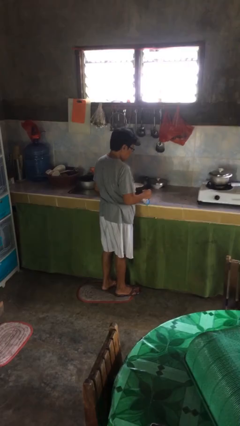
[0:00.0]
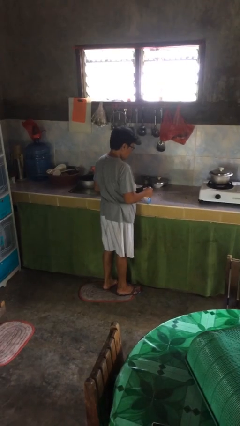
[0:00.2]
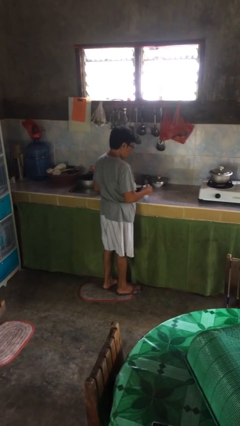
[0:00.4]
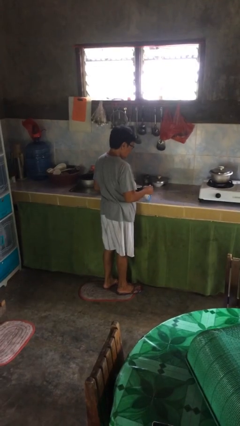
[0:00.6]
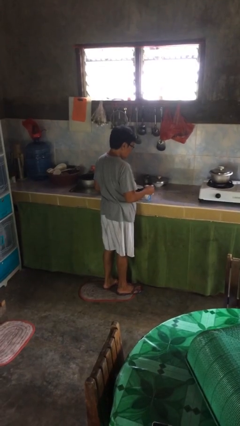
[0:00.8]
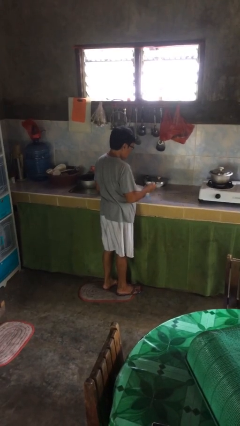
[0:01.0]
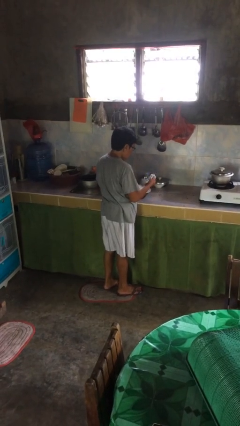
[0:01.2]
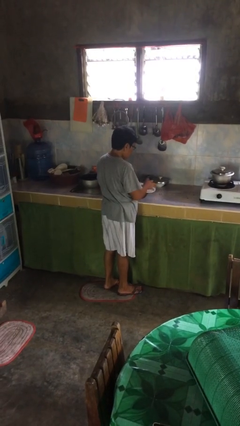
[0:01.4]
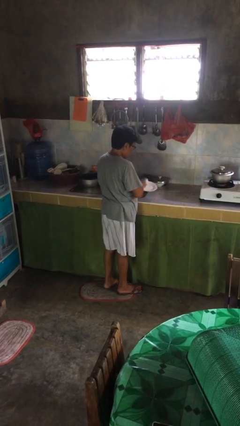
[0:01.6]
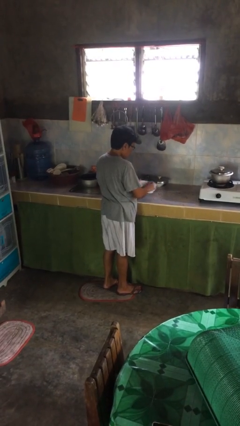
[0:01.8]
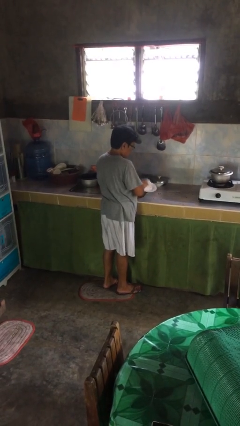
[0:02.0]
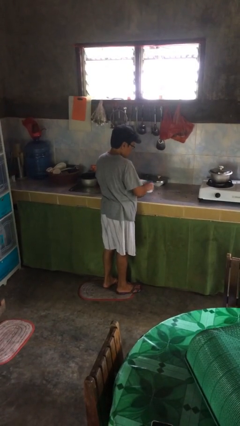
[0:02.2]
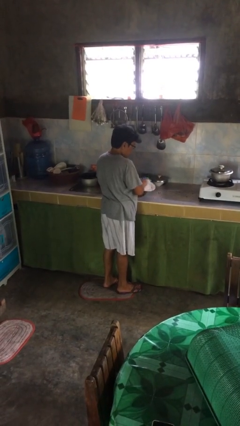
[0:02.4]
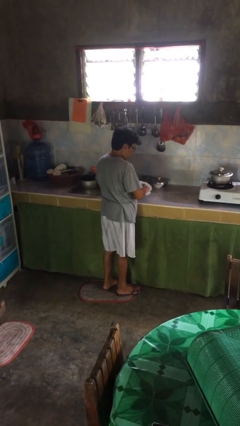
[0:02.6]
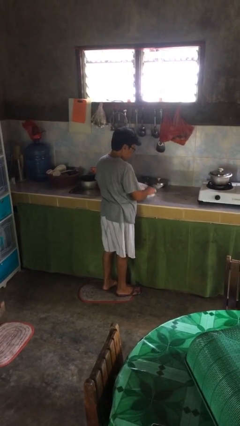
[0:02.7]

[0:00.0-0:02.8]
person dries dish

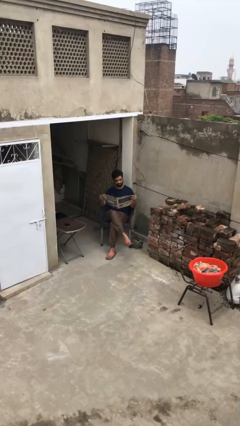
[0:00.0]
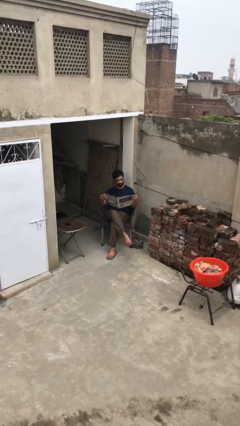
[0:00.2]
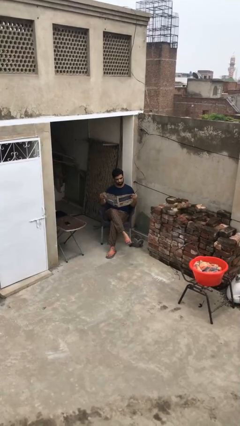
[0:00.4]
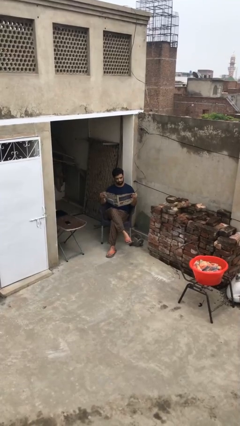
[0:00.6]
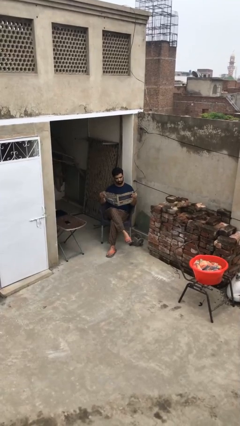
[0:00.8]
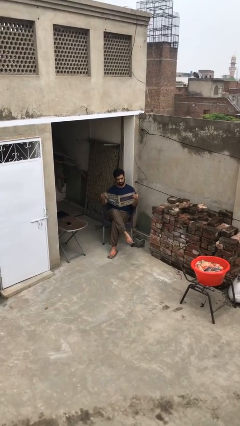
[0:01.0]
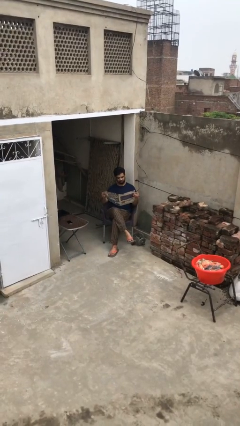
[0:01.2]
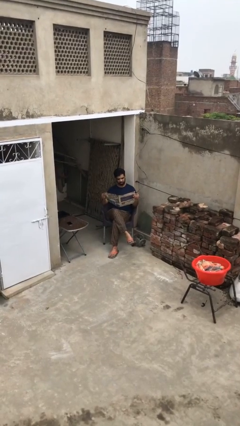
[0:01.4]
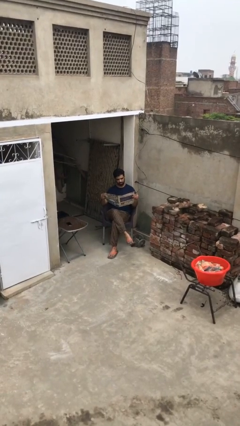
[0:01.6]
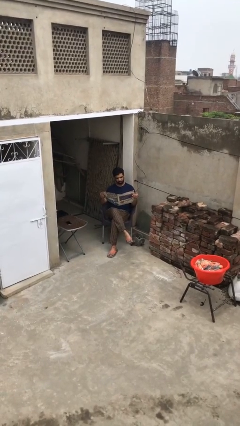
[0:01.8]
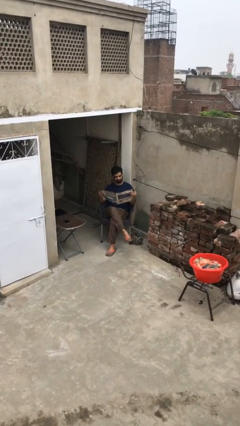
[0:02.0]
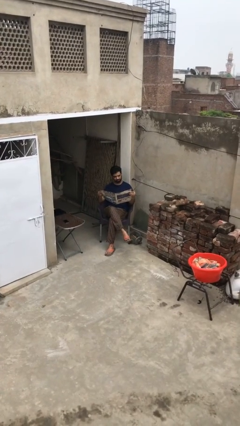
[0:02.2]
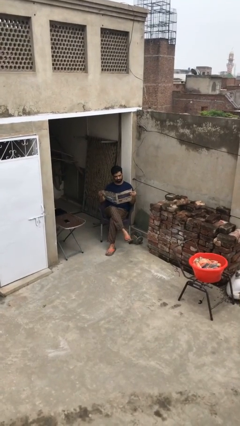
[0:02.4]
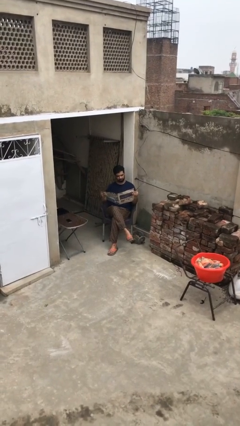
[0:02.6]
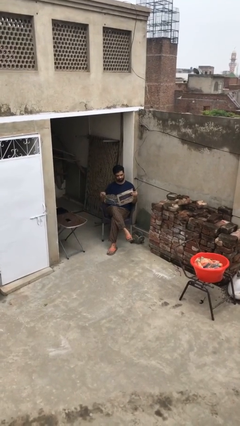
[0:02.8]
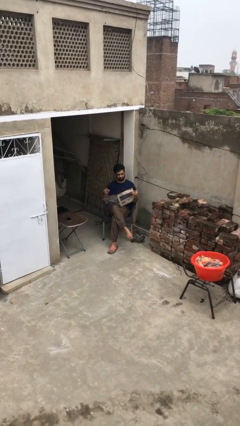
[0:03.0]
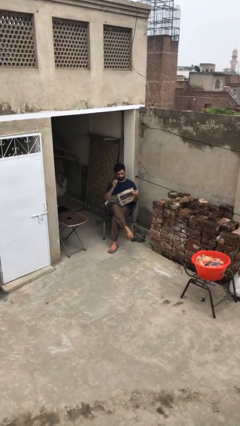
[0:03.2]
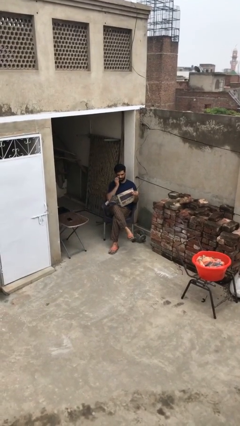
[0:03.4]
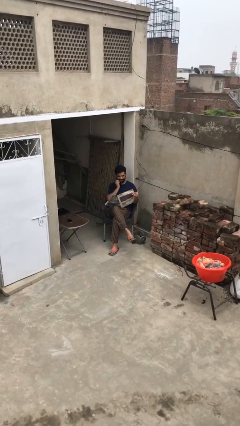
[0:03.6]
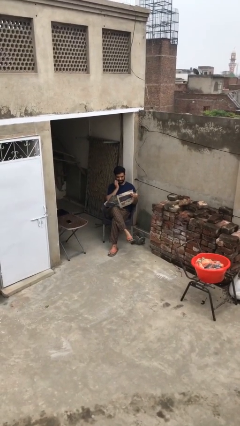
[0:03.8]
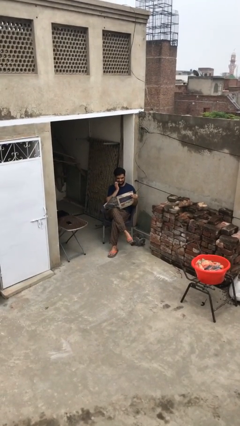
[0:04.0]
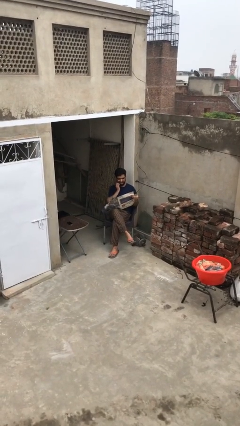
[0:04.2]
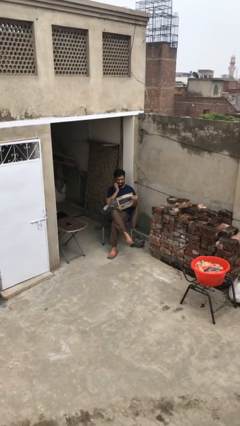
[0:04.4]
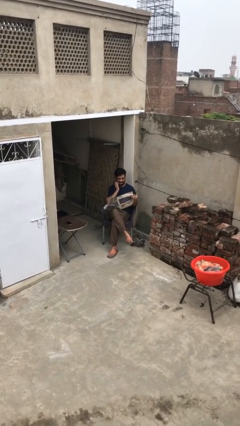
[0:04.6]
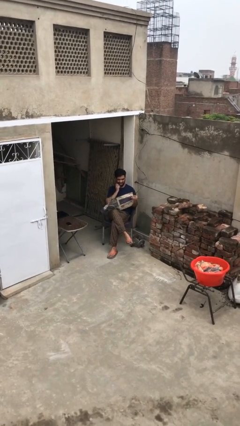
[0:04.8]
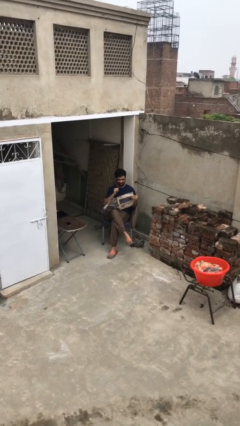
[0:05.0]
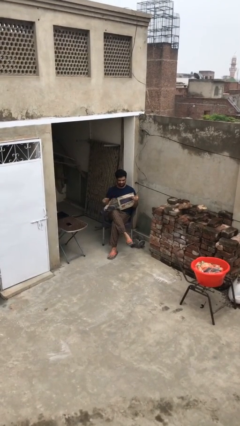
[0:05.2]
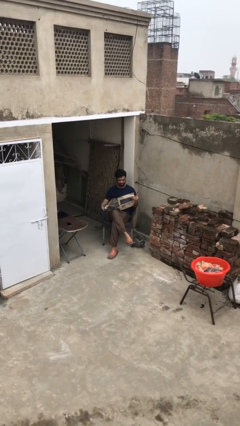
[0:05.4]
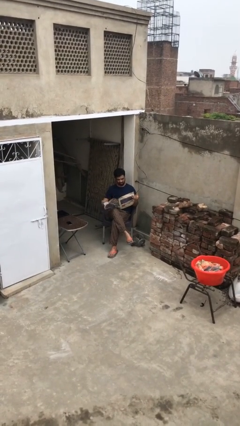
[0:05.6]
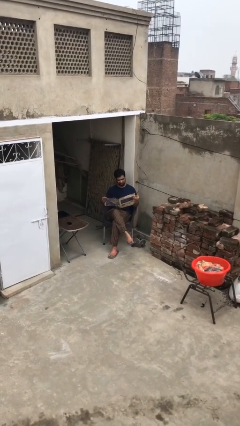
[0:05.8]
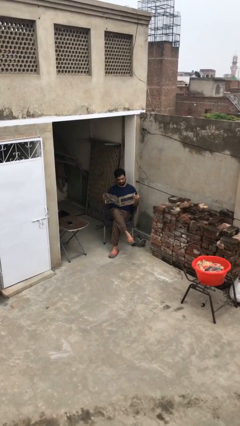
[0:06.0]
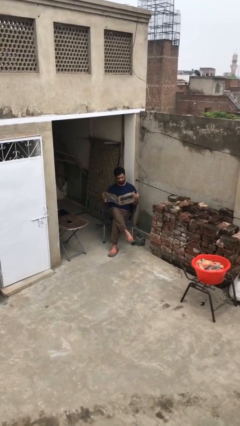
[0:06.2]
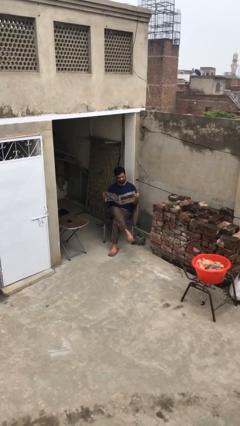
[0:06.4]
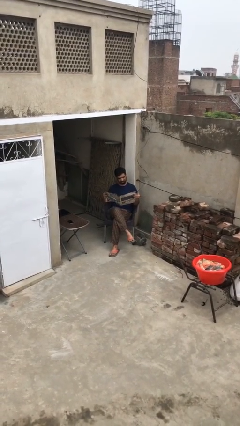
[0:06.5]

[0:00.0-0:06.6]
person reads document

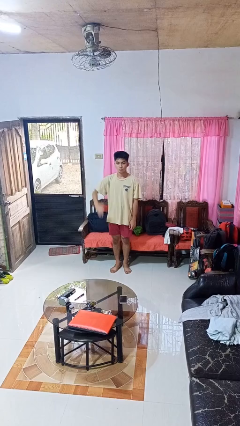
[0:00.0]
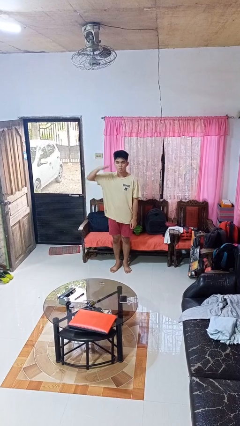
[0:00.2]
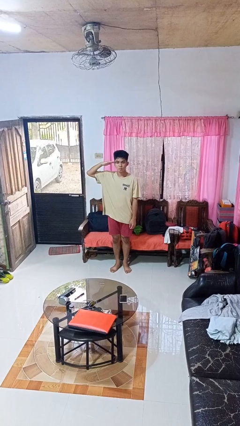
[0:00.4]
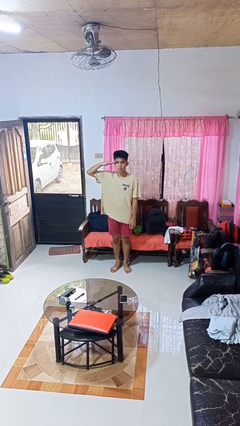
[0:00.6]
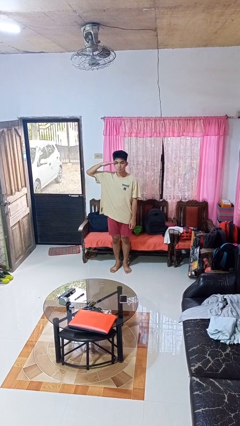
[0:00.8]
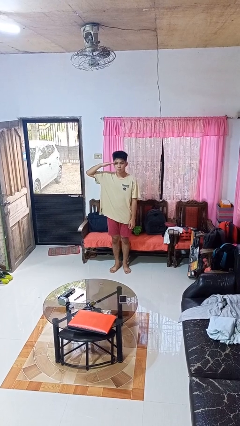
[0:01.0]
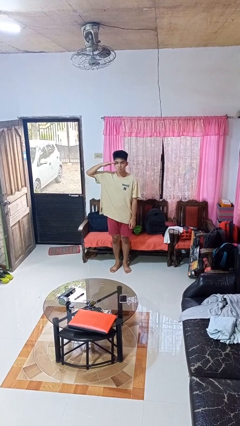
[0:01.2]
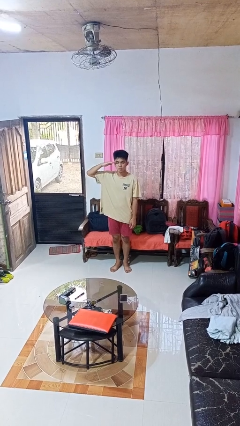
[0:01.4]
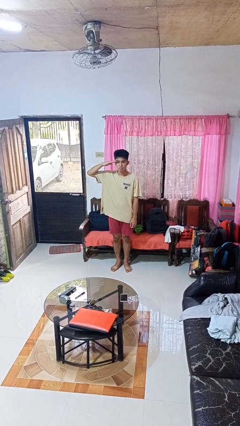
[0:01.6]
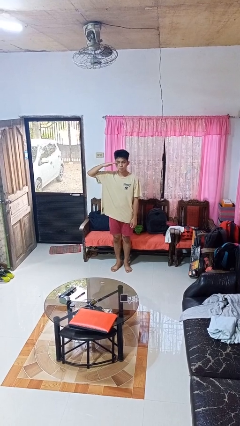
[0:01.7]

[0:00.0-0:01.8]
person salutes

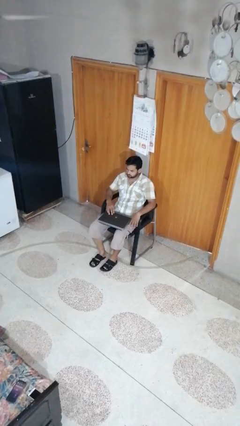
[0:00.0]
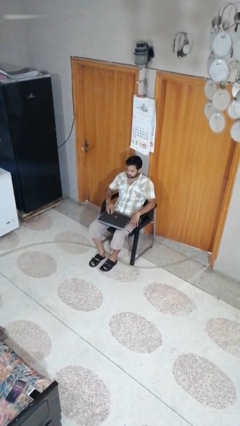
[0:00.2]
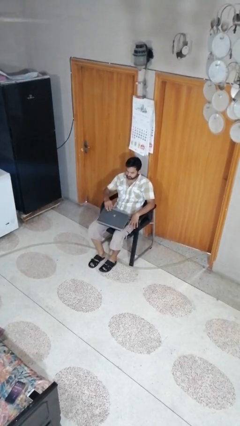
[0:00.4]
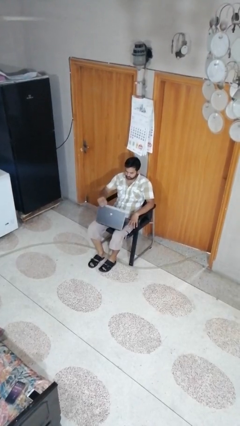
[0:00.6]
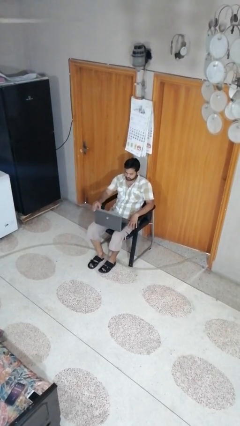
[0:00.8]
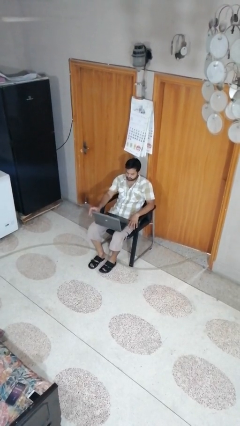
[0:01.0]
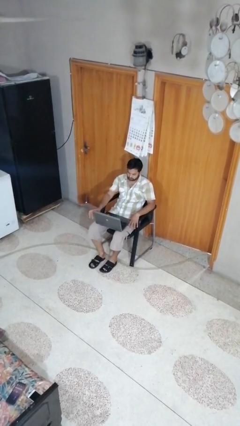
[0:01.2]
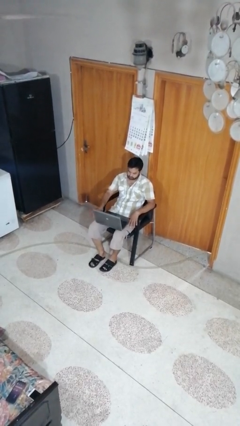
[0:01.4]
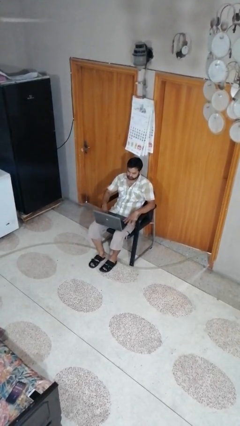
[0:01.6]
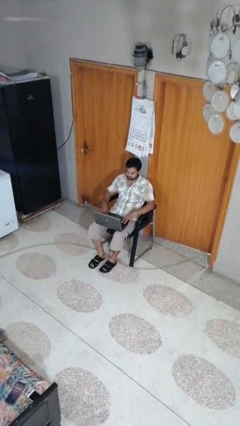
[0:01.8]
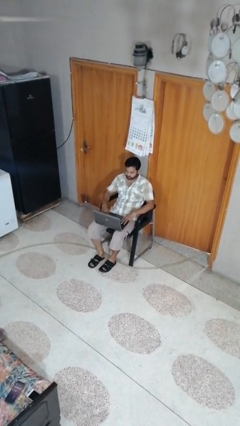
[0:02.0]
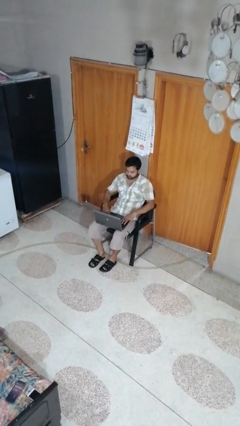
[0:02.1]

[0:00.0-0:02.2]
person opens laptop

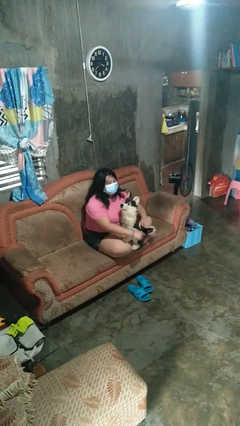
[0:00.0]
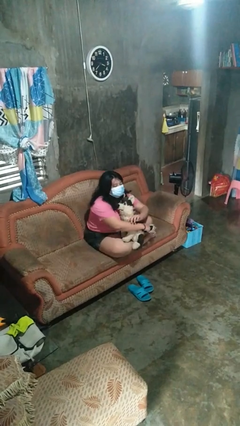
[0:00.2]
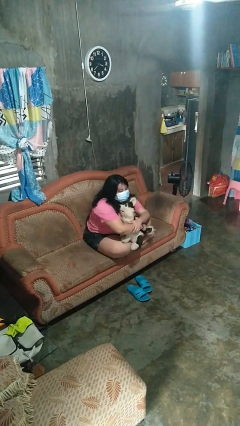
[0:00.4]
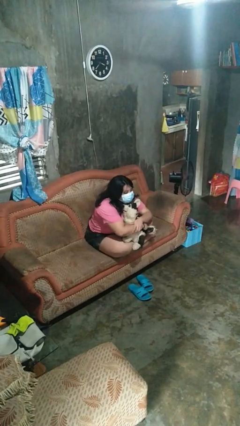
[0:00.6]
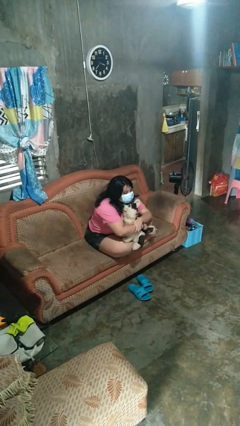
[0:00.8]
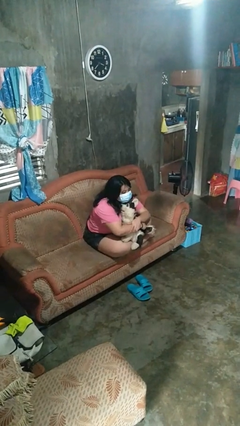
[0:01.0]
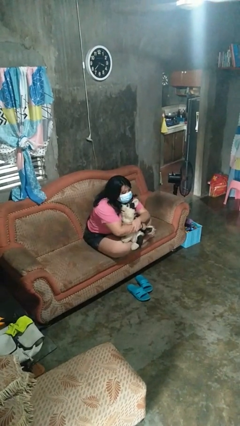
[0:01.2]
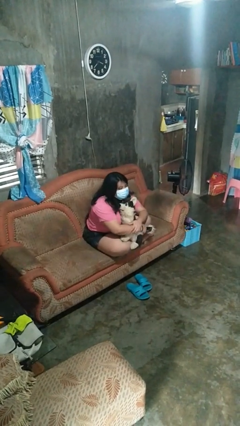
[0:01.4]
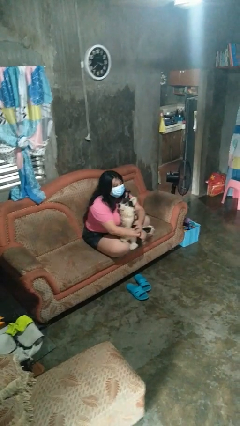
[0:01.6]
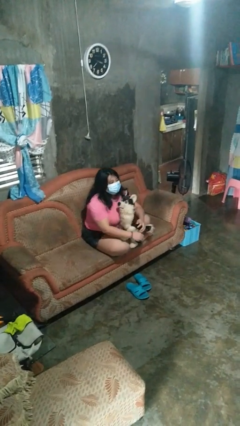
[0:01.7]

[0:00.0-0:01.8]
person hugs stuffed animal

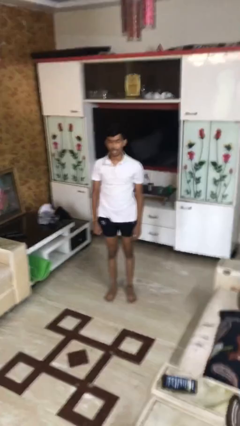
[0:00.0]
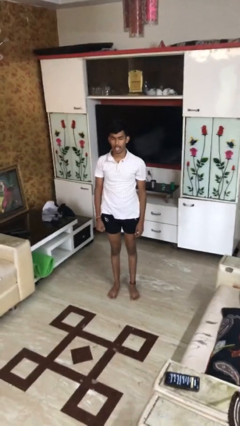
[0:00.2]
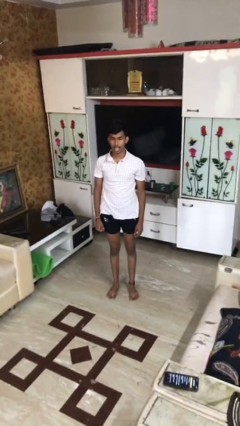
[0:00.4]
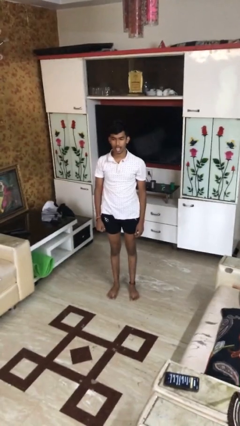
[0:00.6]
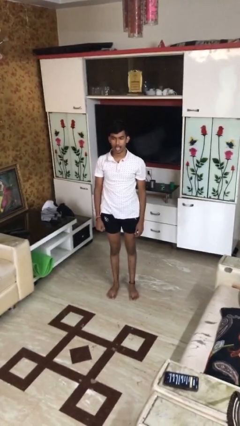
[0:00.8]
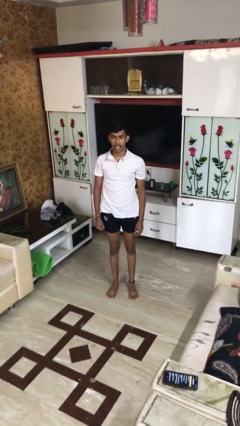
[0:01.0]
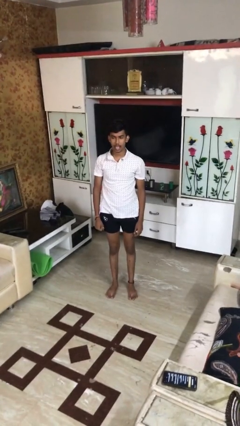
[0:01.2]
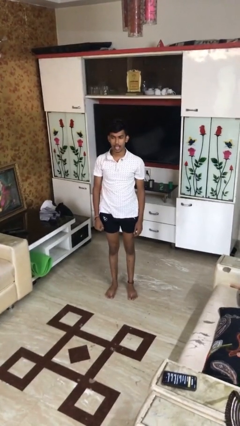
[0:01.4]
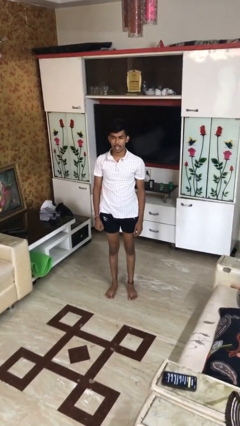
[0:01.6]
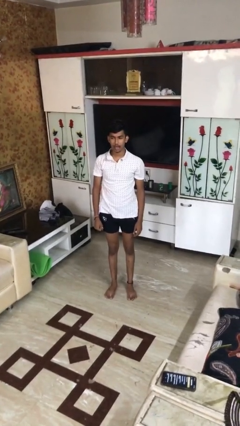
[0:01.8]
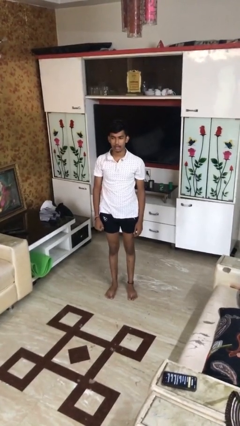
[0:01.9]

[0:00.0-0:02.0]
person sticks out tongue
